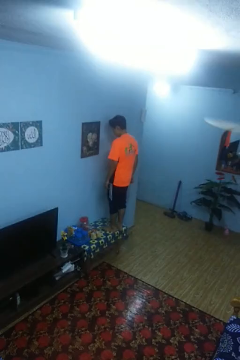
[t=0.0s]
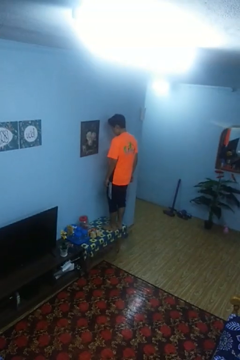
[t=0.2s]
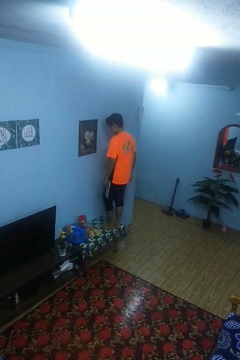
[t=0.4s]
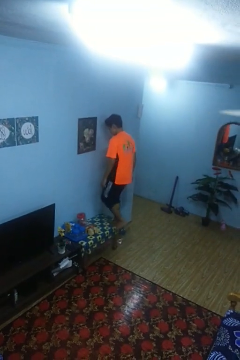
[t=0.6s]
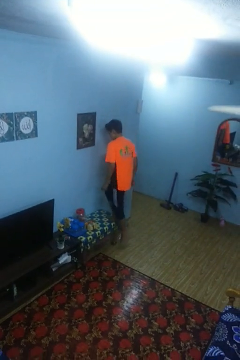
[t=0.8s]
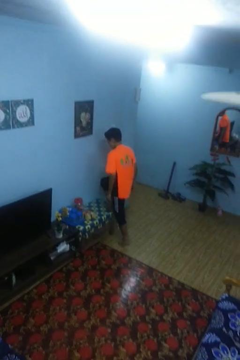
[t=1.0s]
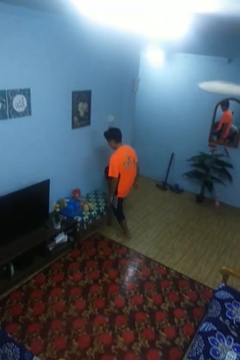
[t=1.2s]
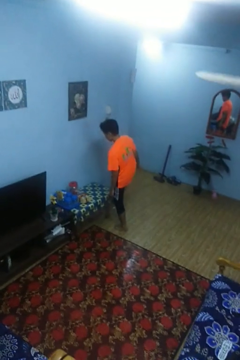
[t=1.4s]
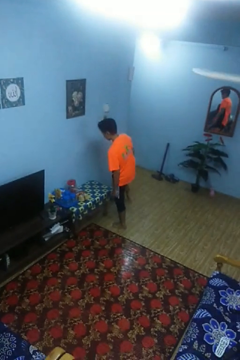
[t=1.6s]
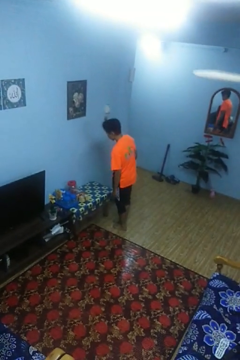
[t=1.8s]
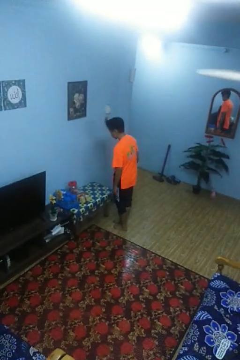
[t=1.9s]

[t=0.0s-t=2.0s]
person climbs off table

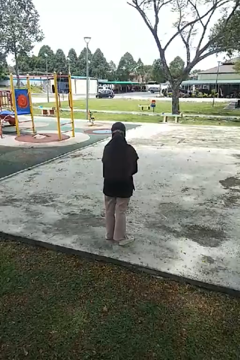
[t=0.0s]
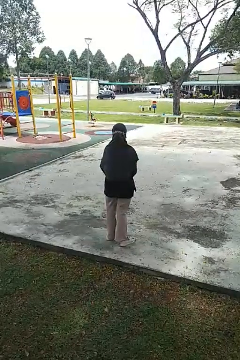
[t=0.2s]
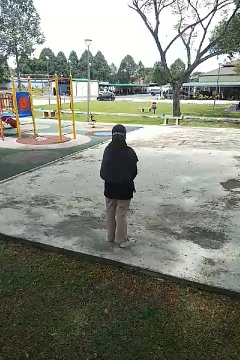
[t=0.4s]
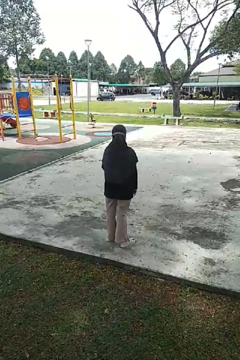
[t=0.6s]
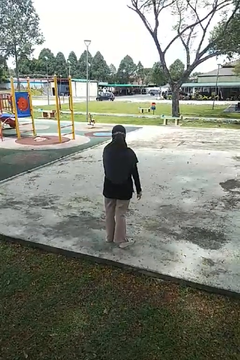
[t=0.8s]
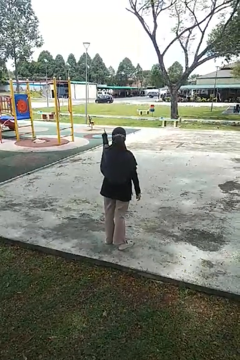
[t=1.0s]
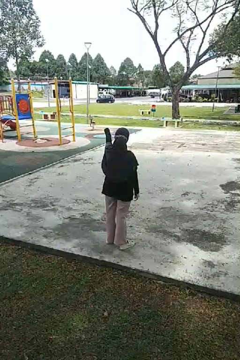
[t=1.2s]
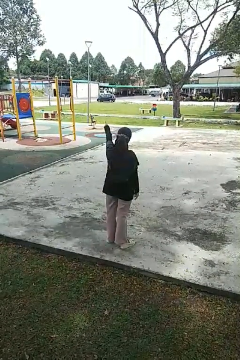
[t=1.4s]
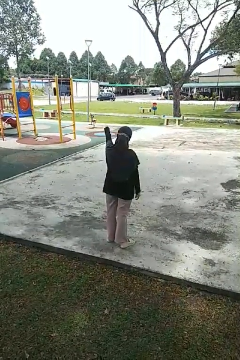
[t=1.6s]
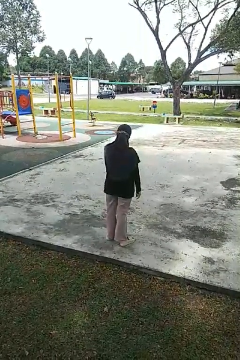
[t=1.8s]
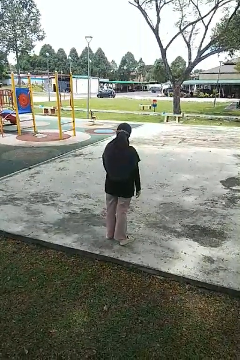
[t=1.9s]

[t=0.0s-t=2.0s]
person points at person

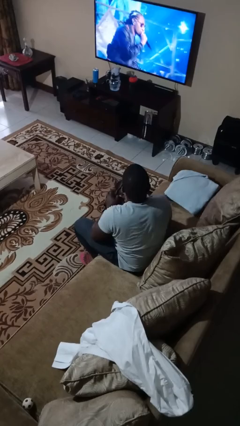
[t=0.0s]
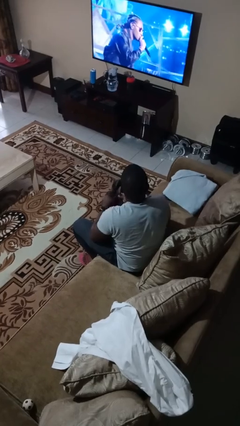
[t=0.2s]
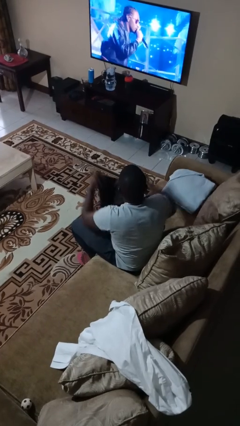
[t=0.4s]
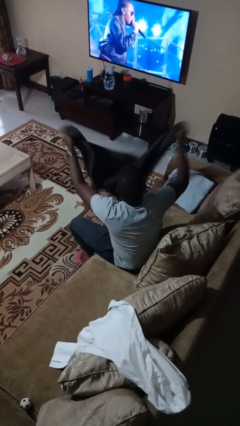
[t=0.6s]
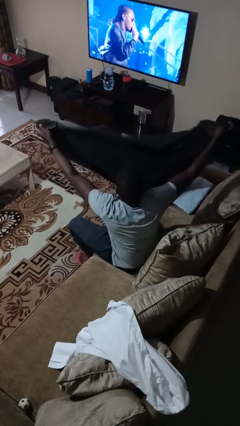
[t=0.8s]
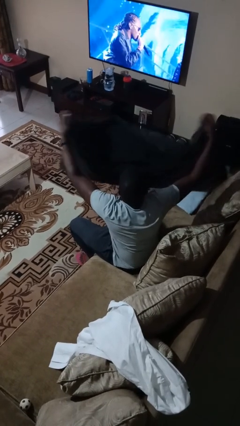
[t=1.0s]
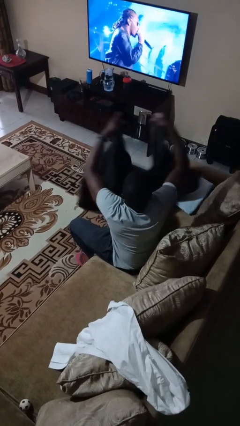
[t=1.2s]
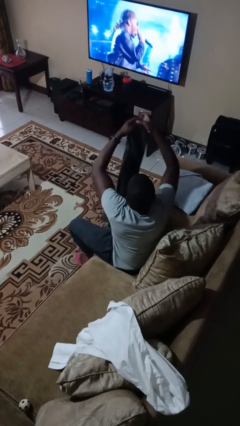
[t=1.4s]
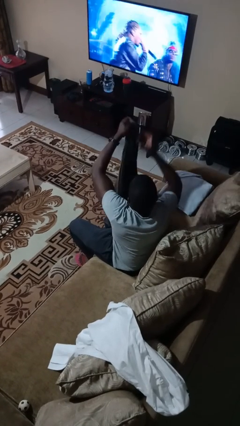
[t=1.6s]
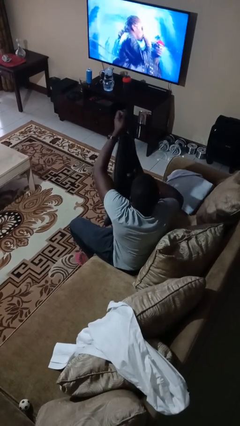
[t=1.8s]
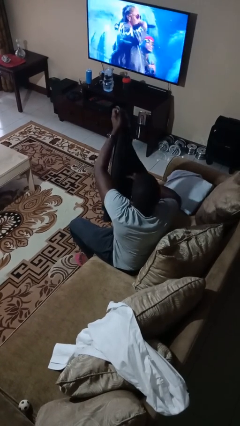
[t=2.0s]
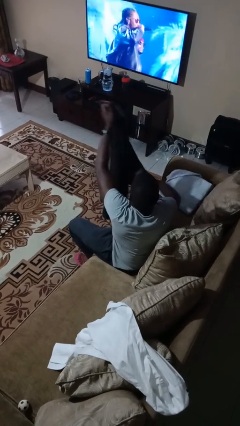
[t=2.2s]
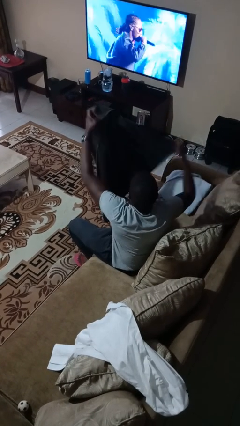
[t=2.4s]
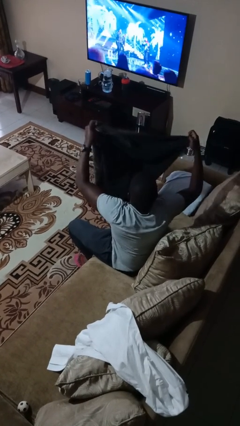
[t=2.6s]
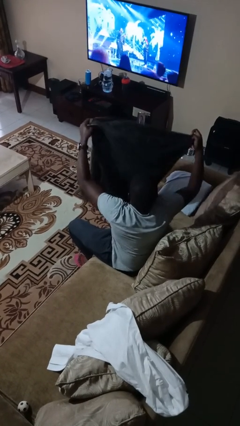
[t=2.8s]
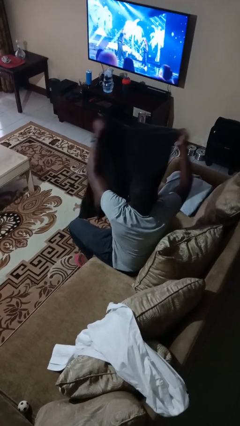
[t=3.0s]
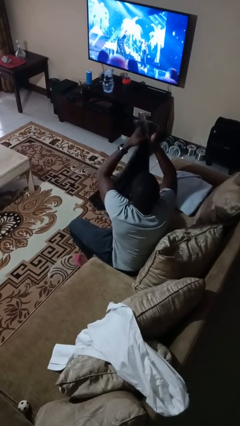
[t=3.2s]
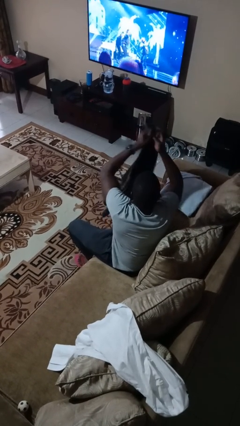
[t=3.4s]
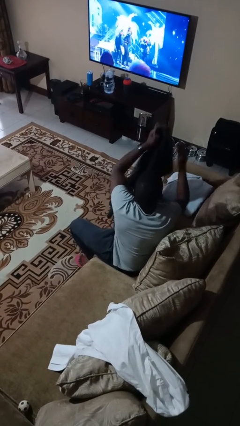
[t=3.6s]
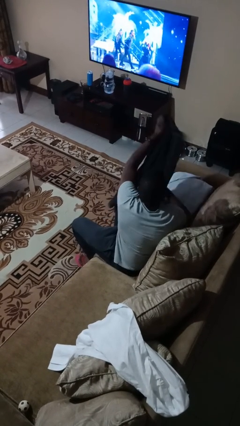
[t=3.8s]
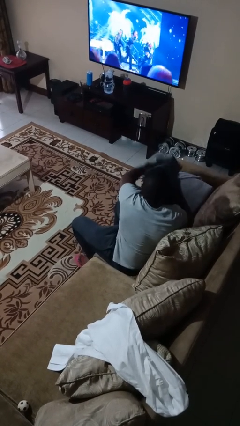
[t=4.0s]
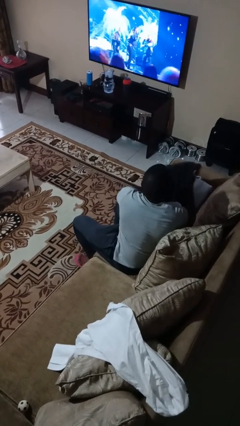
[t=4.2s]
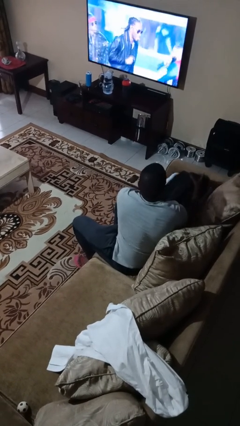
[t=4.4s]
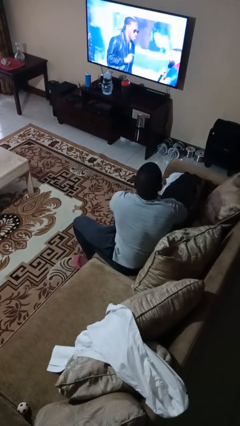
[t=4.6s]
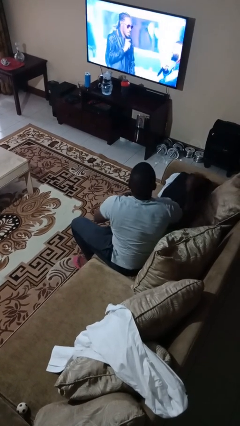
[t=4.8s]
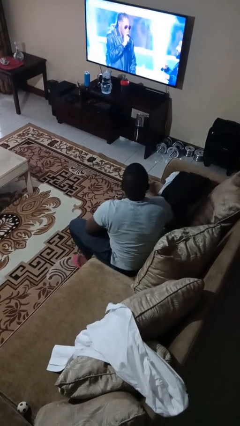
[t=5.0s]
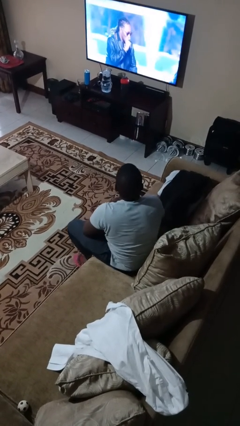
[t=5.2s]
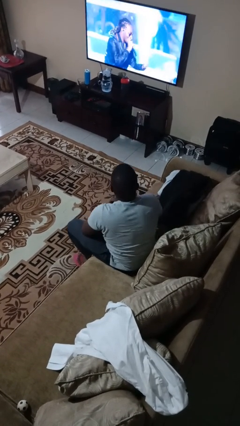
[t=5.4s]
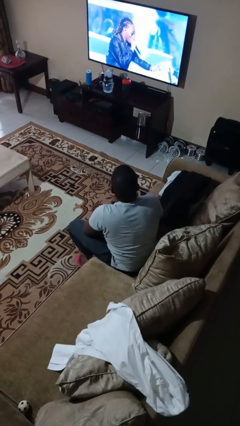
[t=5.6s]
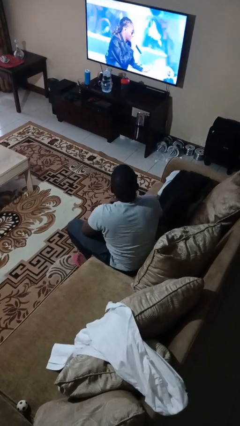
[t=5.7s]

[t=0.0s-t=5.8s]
person folds towel

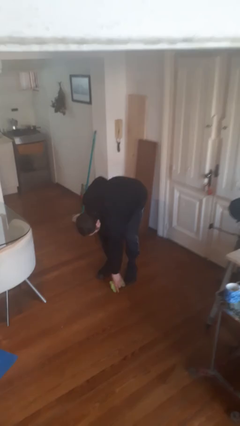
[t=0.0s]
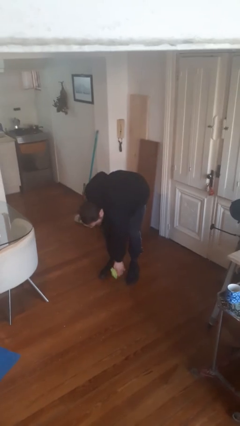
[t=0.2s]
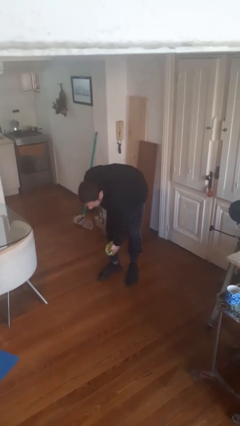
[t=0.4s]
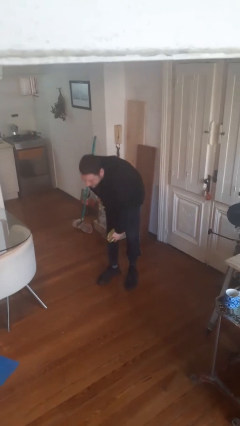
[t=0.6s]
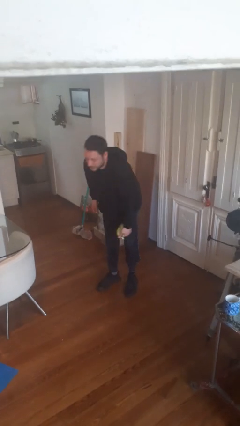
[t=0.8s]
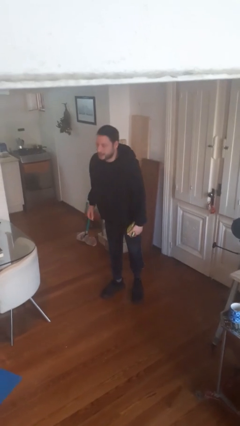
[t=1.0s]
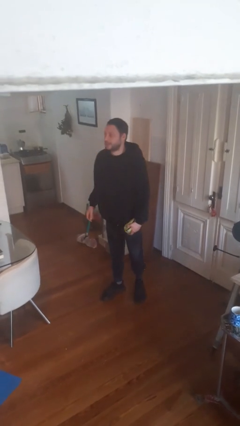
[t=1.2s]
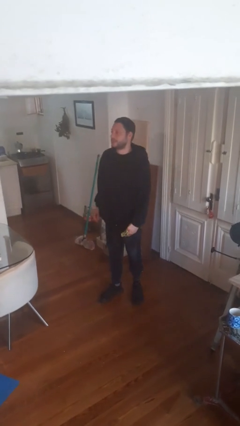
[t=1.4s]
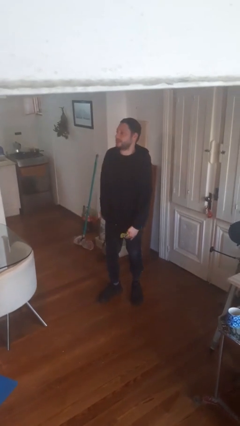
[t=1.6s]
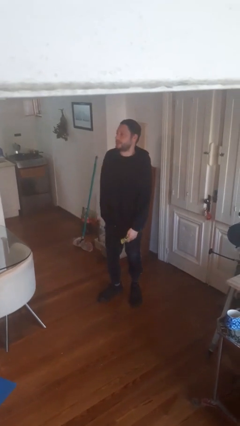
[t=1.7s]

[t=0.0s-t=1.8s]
person picks up object from floor

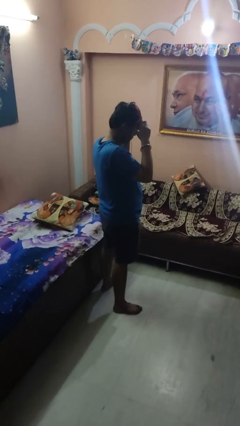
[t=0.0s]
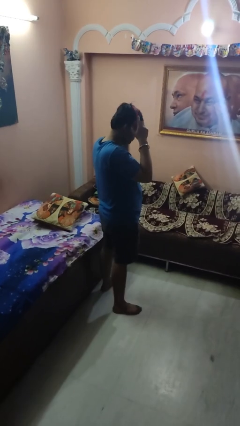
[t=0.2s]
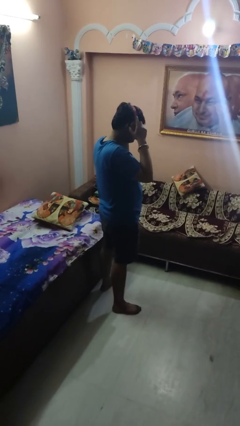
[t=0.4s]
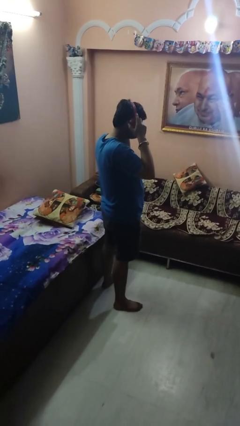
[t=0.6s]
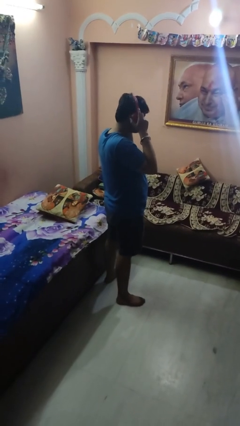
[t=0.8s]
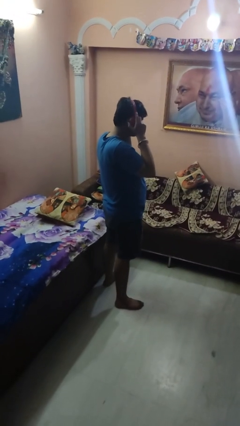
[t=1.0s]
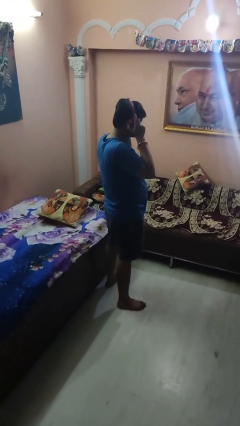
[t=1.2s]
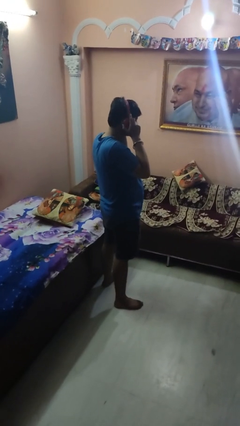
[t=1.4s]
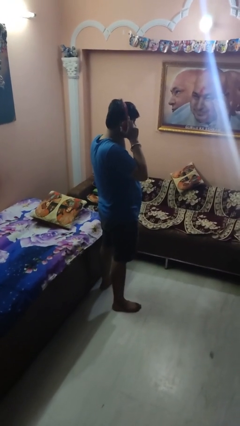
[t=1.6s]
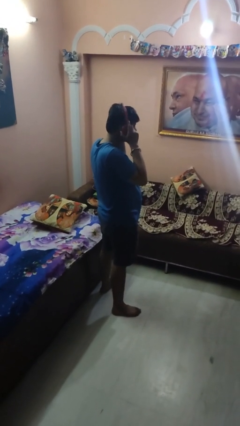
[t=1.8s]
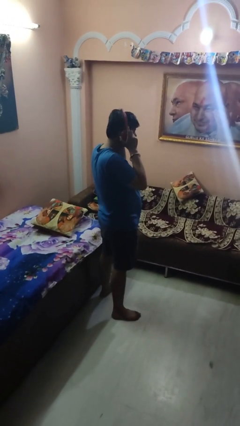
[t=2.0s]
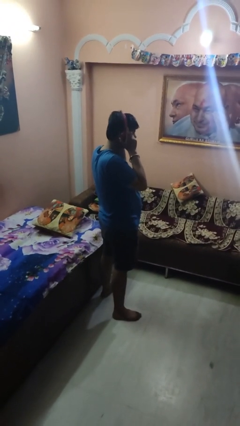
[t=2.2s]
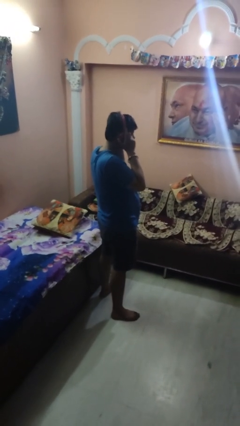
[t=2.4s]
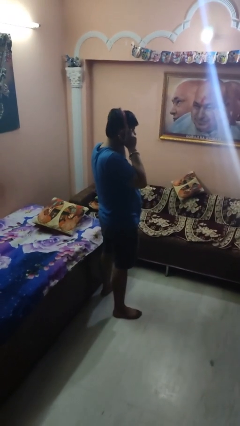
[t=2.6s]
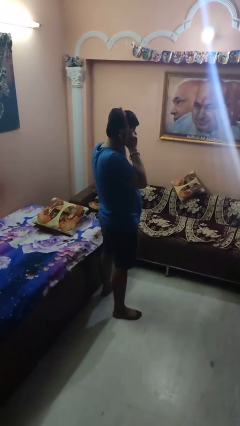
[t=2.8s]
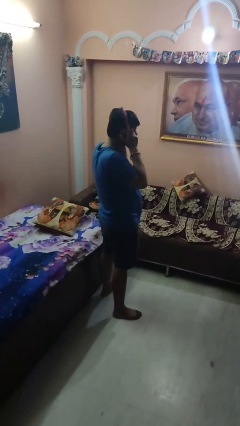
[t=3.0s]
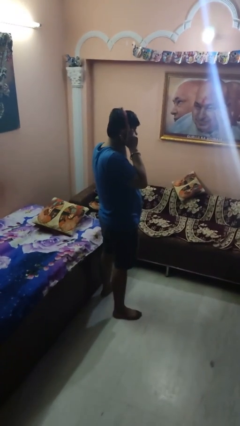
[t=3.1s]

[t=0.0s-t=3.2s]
person puts on headphones

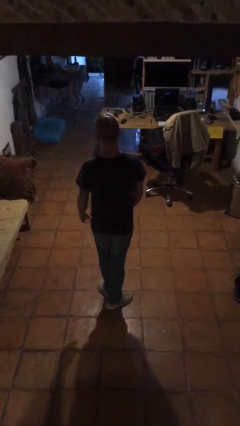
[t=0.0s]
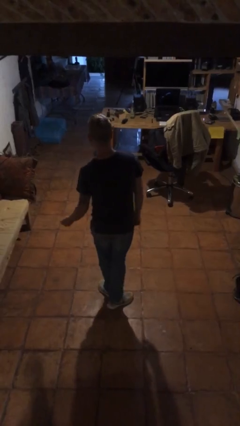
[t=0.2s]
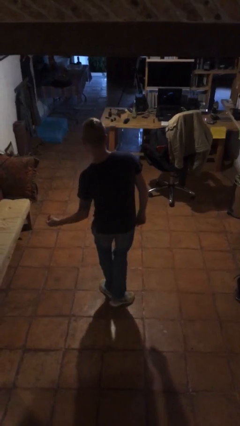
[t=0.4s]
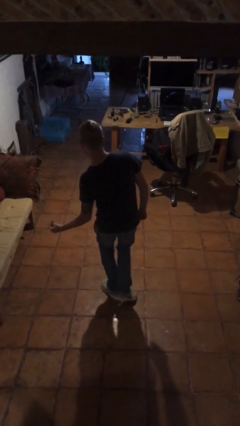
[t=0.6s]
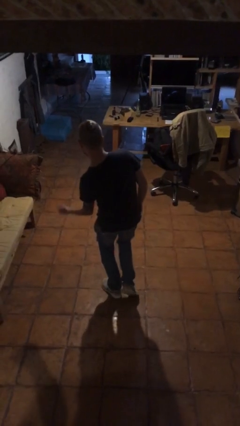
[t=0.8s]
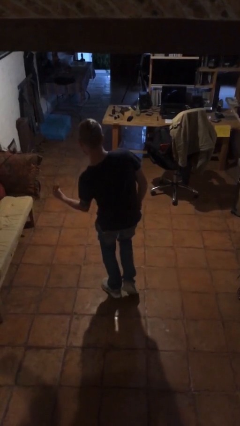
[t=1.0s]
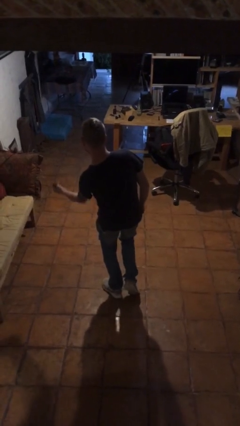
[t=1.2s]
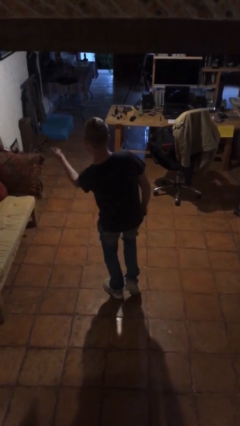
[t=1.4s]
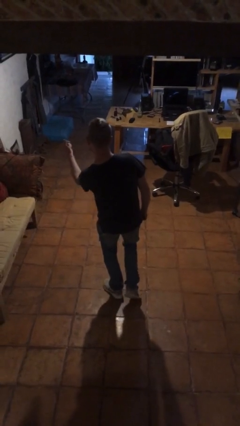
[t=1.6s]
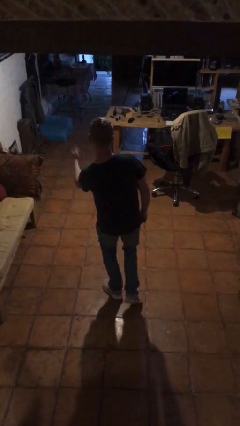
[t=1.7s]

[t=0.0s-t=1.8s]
person snaps fingers

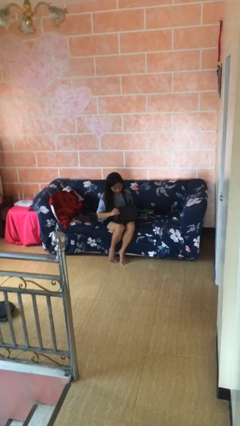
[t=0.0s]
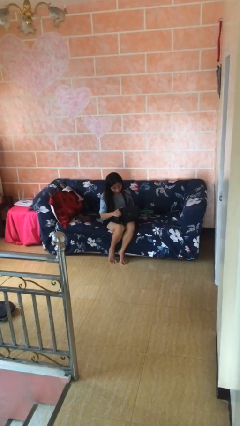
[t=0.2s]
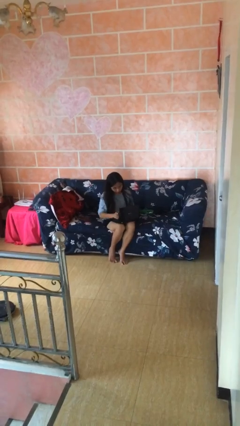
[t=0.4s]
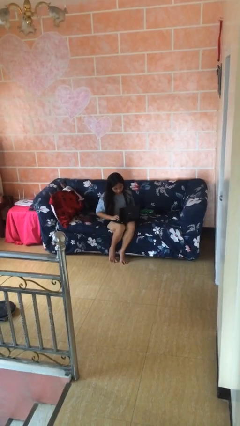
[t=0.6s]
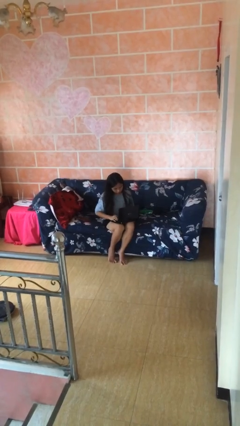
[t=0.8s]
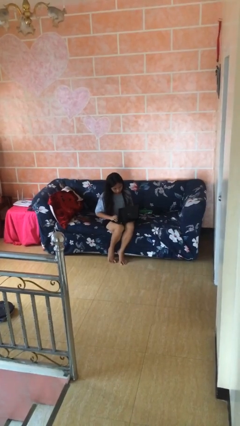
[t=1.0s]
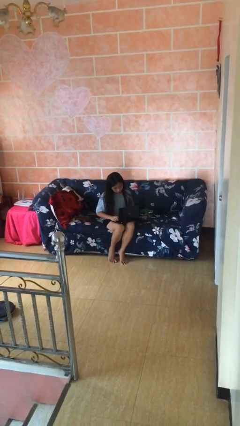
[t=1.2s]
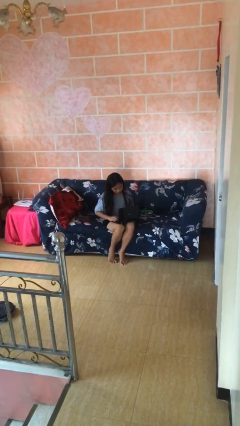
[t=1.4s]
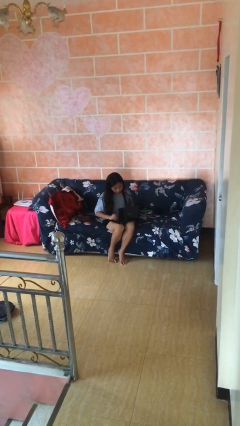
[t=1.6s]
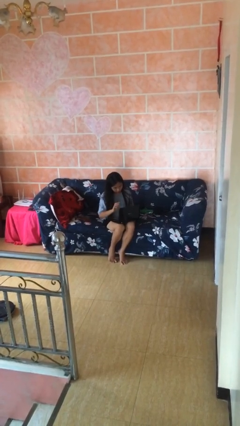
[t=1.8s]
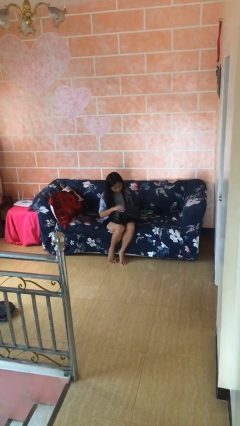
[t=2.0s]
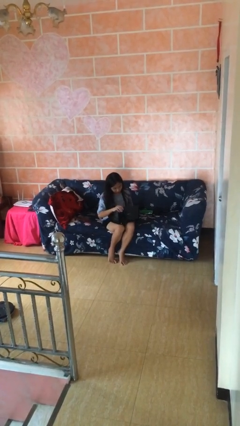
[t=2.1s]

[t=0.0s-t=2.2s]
person interacts with laptop
